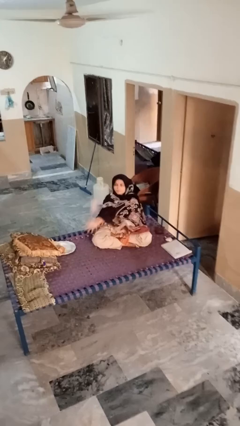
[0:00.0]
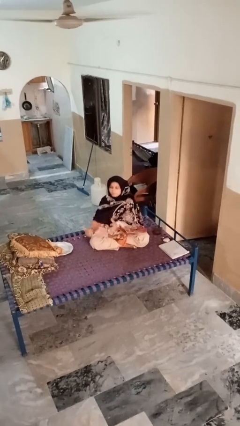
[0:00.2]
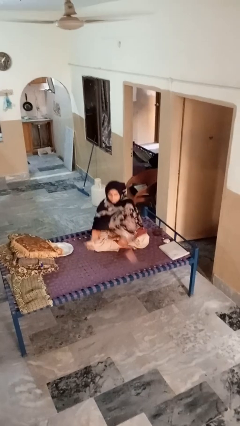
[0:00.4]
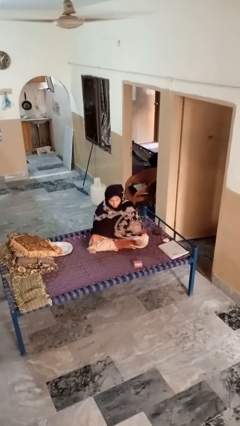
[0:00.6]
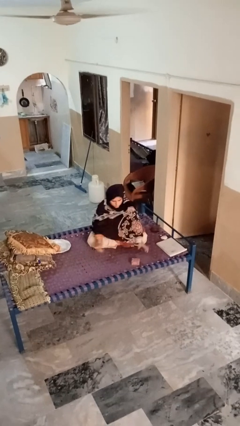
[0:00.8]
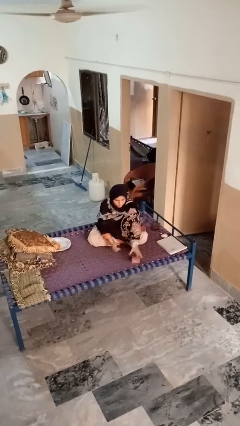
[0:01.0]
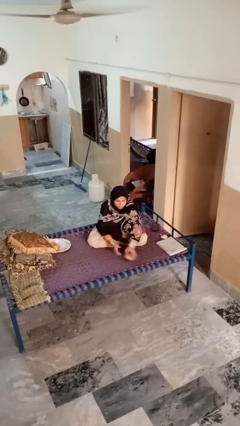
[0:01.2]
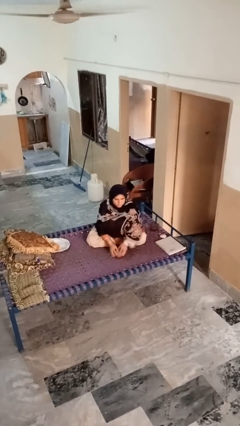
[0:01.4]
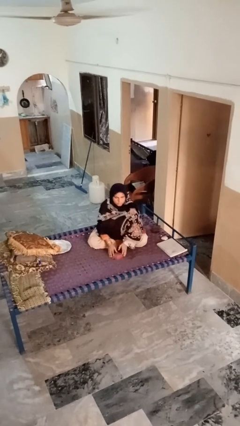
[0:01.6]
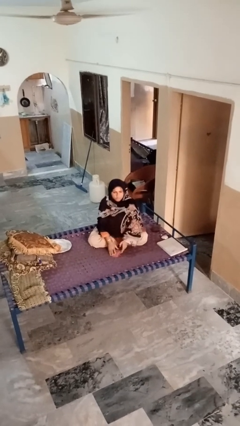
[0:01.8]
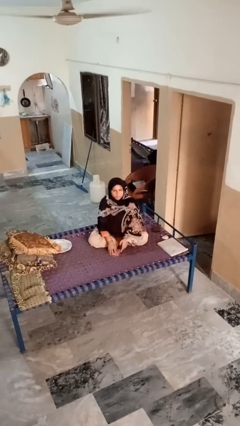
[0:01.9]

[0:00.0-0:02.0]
person catches dropped object

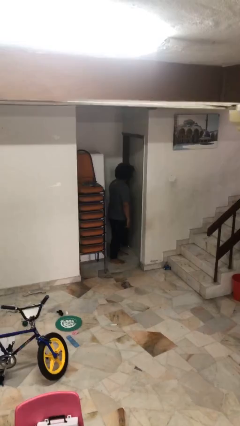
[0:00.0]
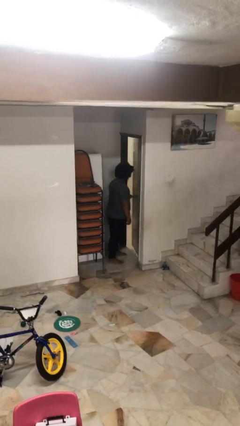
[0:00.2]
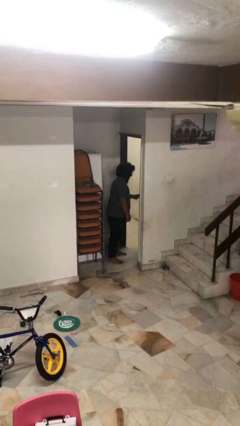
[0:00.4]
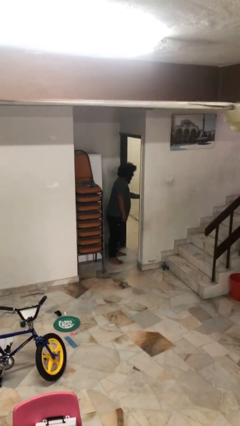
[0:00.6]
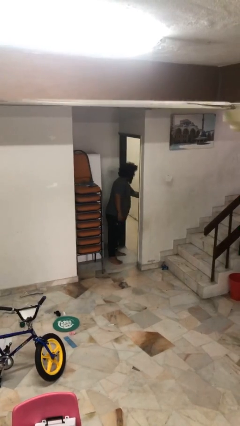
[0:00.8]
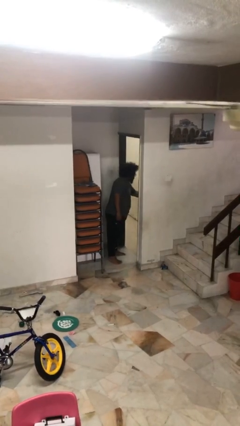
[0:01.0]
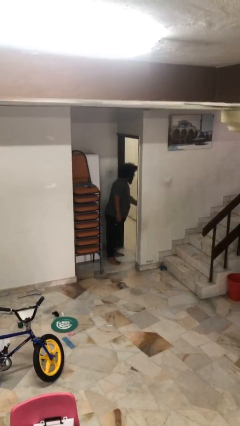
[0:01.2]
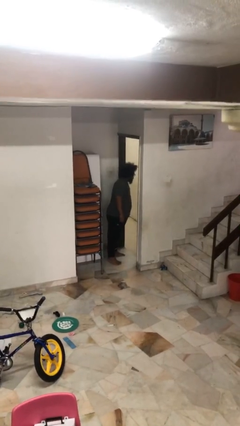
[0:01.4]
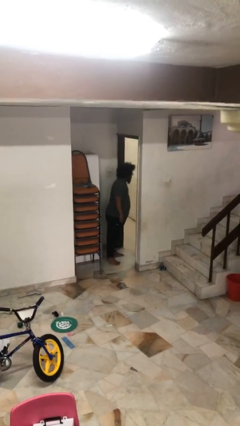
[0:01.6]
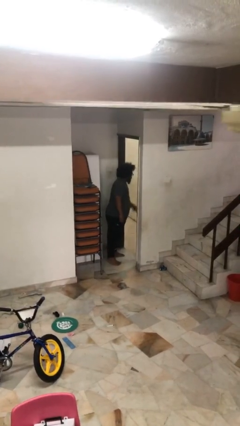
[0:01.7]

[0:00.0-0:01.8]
person opens facility door

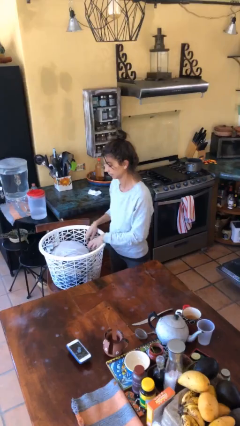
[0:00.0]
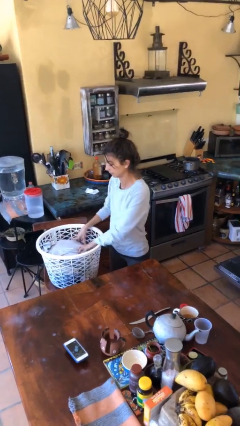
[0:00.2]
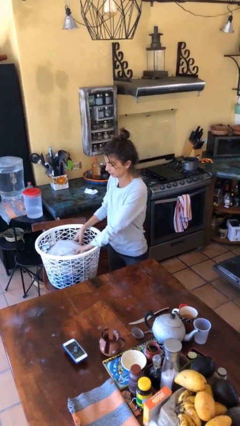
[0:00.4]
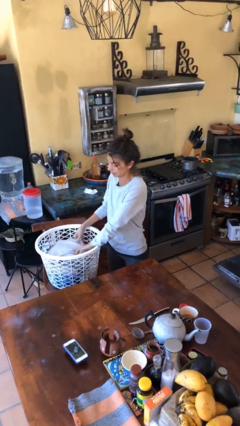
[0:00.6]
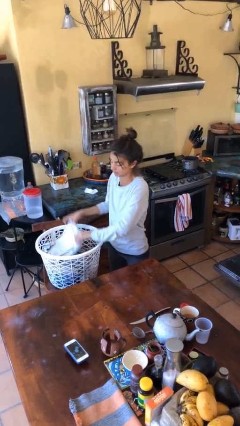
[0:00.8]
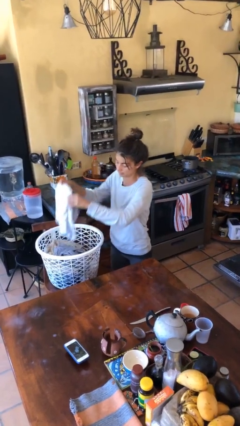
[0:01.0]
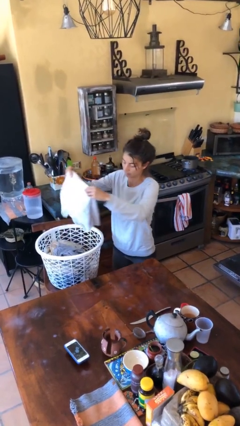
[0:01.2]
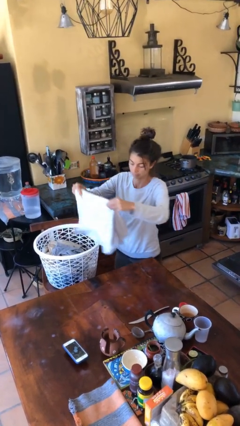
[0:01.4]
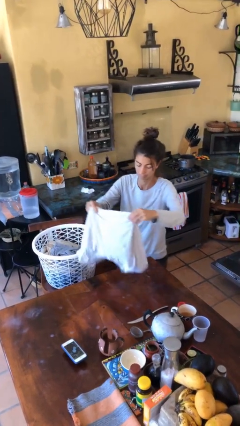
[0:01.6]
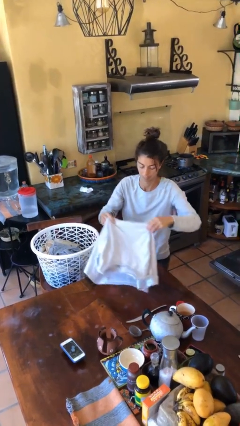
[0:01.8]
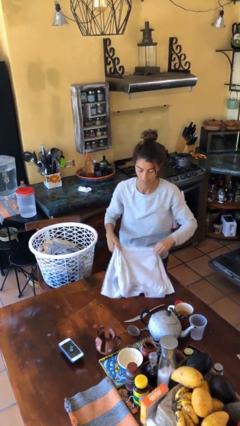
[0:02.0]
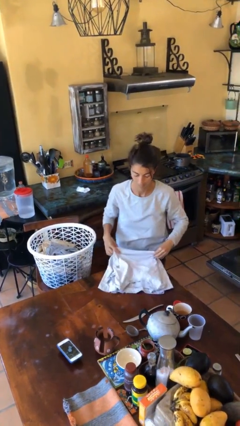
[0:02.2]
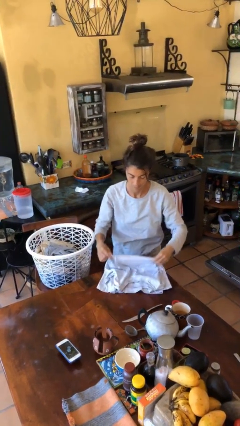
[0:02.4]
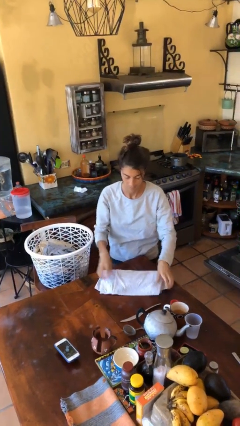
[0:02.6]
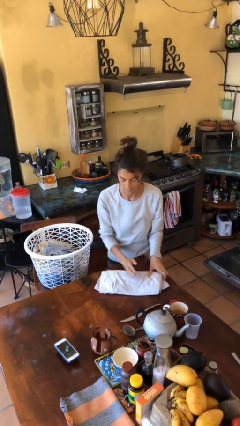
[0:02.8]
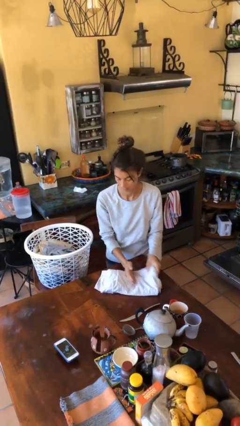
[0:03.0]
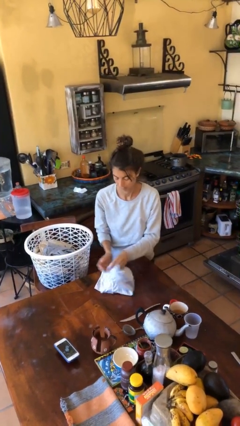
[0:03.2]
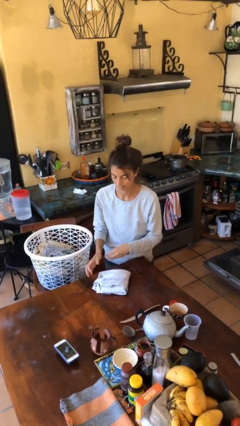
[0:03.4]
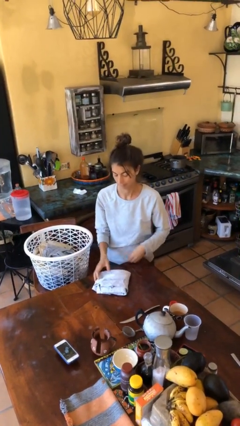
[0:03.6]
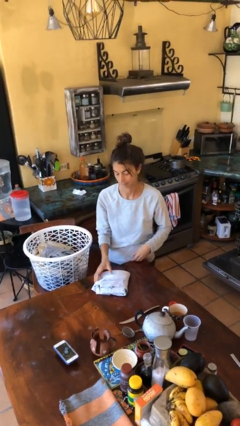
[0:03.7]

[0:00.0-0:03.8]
person folds shirt

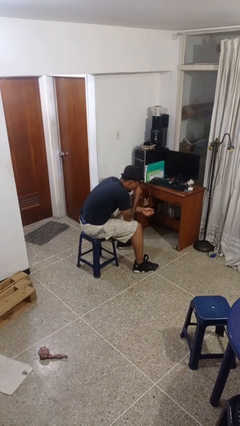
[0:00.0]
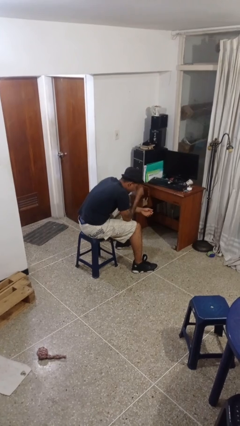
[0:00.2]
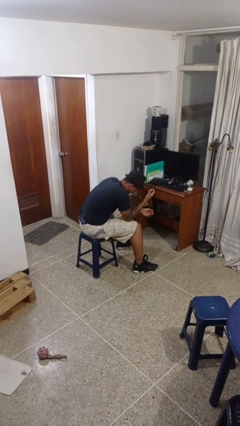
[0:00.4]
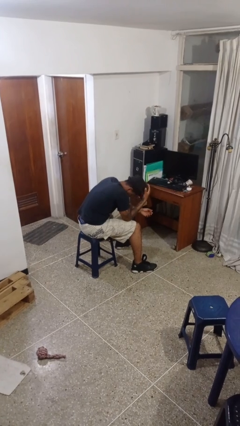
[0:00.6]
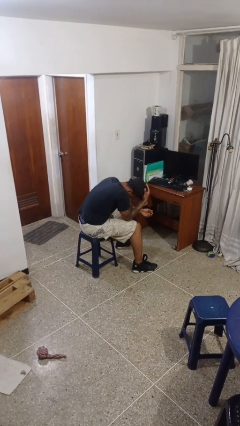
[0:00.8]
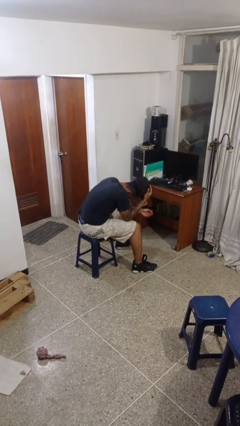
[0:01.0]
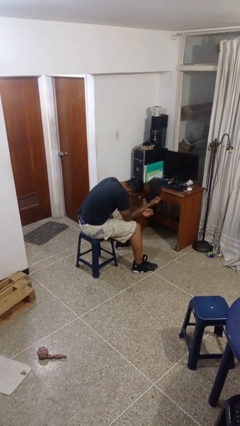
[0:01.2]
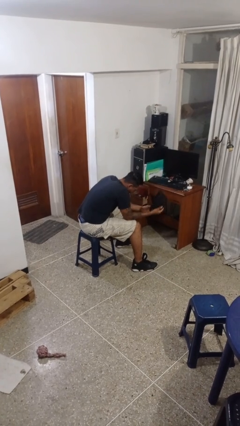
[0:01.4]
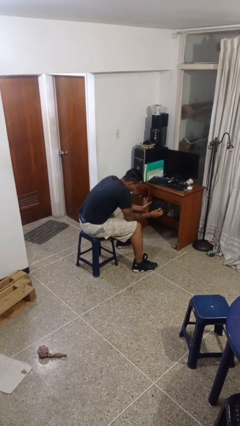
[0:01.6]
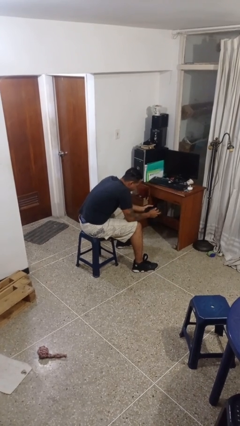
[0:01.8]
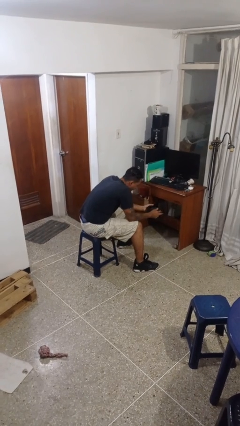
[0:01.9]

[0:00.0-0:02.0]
person takes off hat

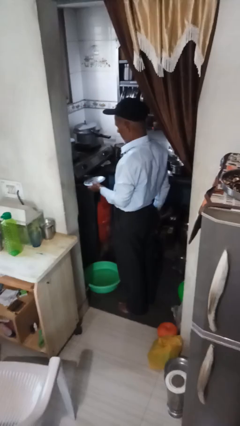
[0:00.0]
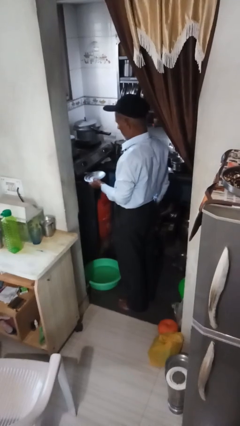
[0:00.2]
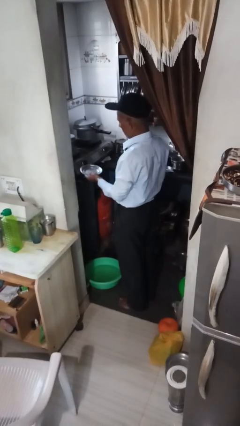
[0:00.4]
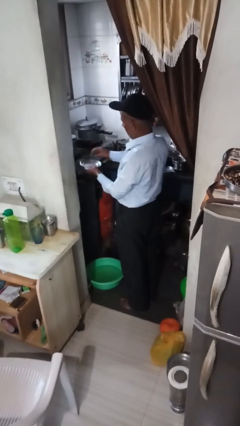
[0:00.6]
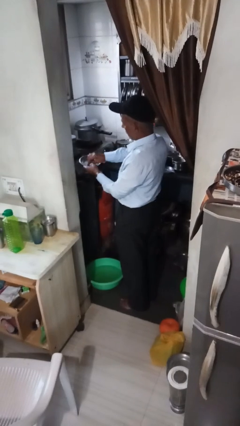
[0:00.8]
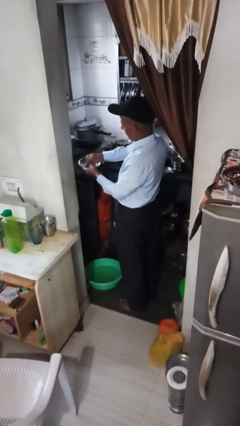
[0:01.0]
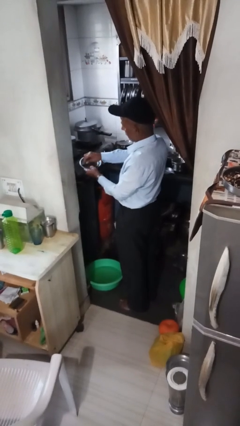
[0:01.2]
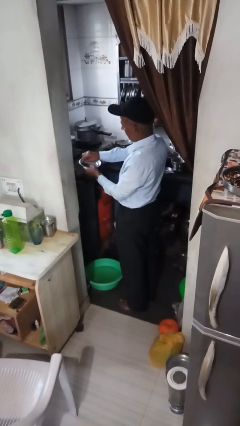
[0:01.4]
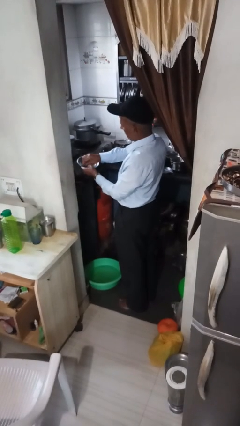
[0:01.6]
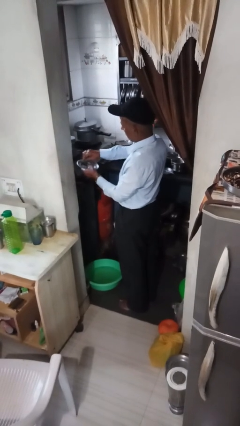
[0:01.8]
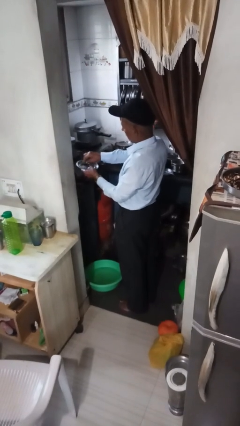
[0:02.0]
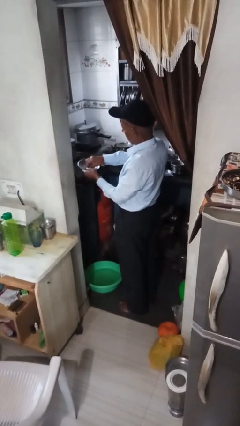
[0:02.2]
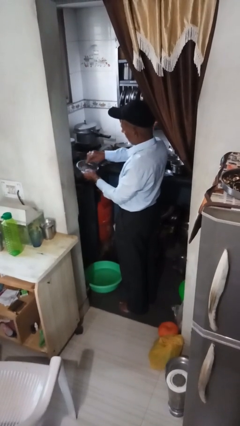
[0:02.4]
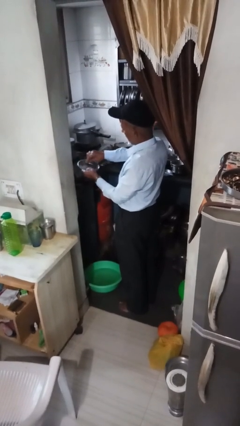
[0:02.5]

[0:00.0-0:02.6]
person washes dish

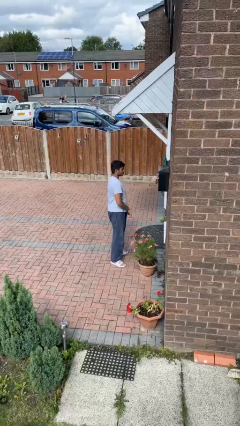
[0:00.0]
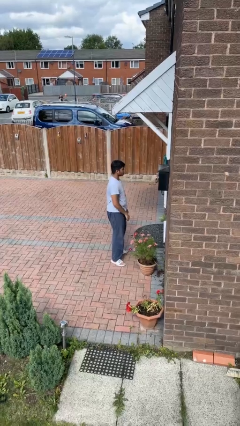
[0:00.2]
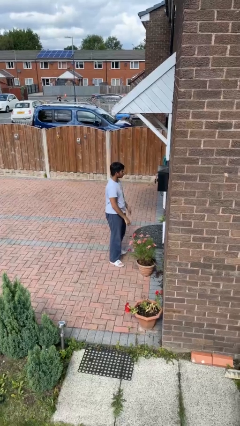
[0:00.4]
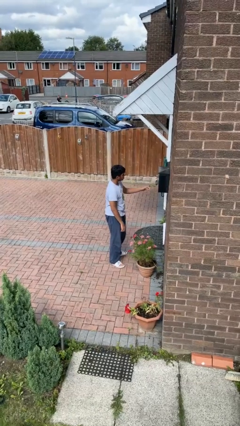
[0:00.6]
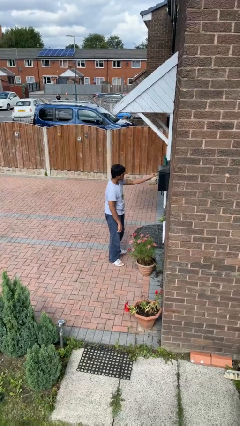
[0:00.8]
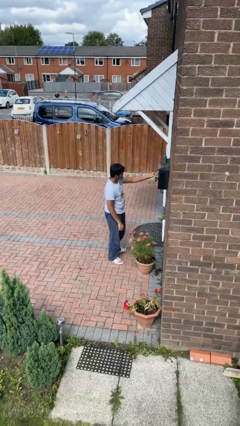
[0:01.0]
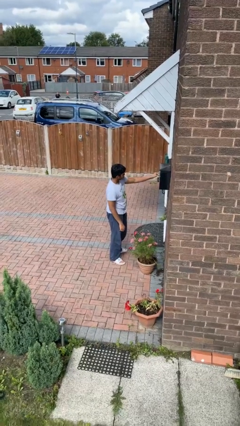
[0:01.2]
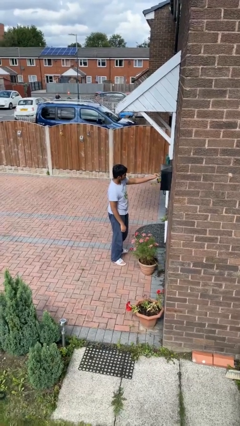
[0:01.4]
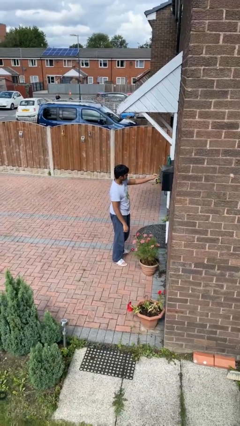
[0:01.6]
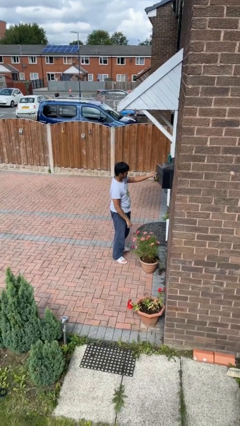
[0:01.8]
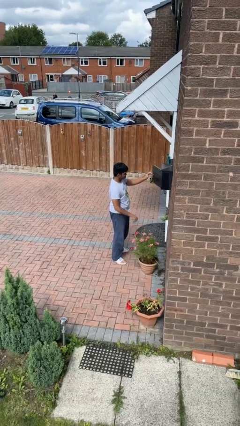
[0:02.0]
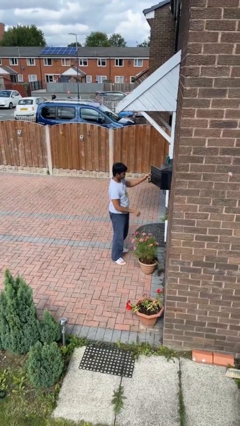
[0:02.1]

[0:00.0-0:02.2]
person opens mailbox

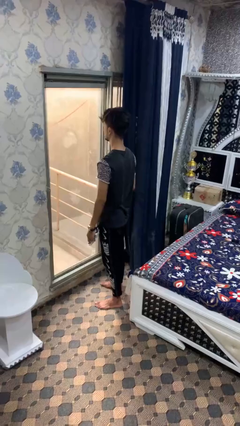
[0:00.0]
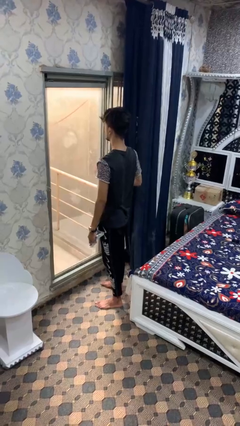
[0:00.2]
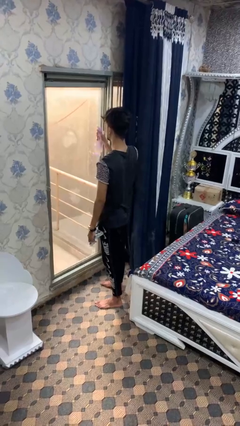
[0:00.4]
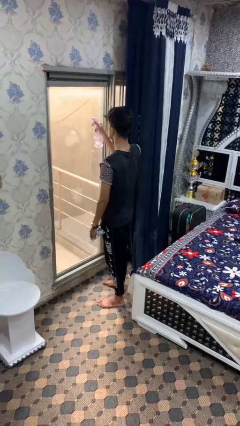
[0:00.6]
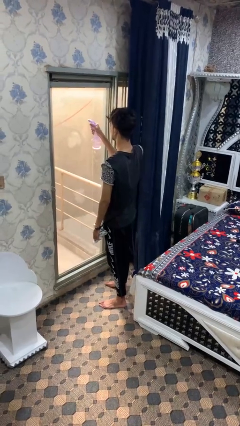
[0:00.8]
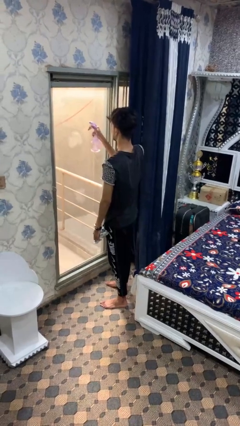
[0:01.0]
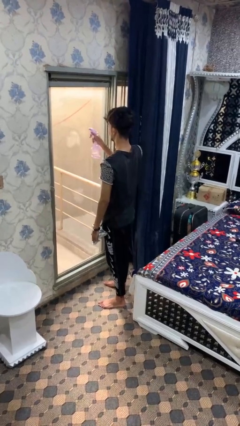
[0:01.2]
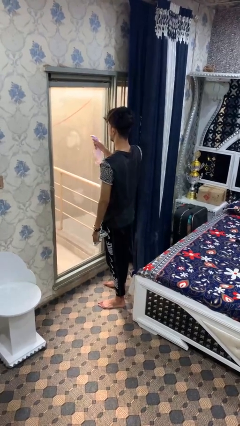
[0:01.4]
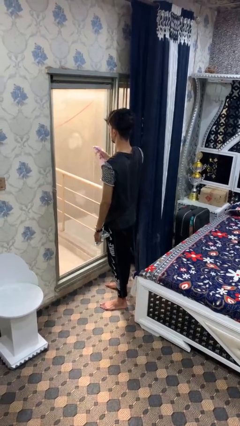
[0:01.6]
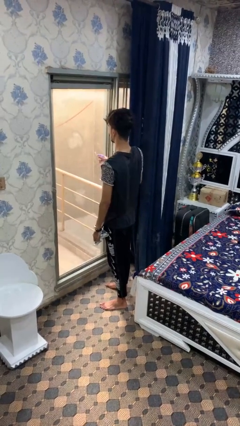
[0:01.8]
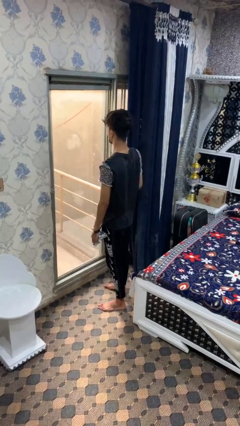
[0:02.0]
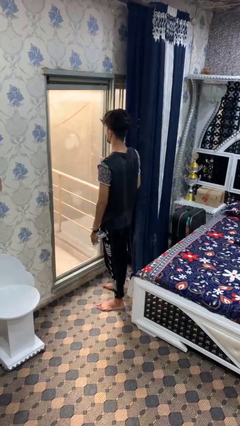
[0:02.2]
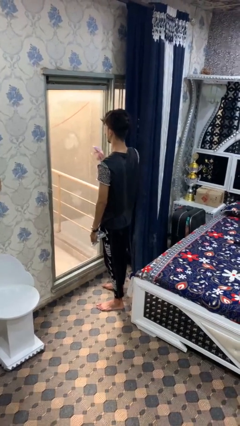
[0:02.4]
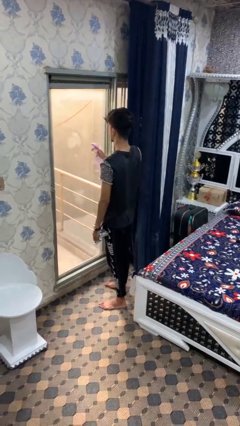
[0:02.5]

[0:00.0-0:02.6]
person sprays from bottle
